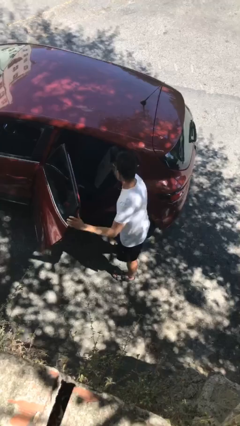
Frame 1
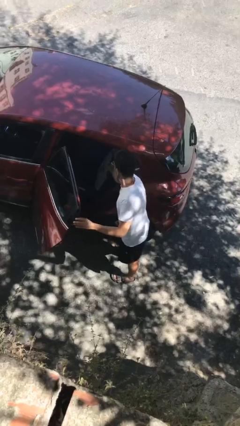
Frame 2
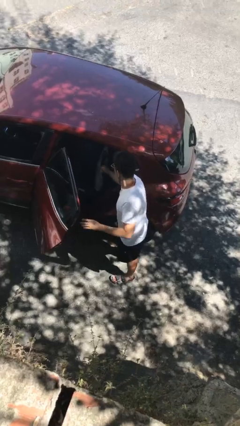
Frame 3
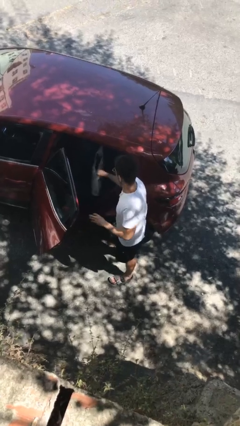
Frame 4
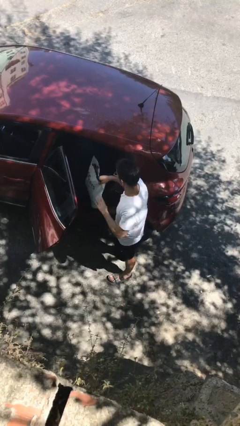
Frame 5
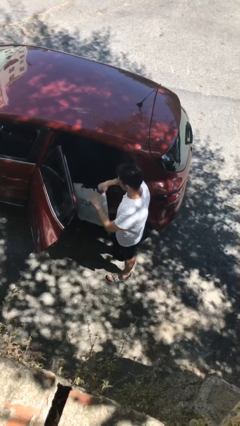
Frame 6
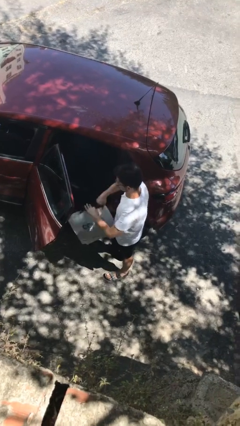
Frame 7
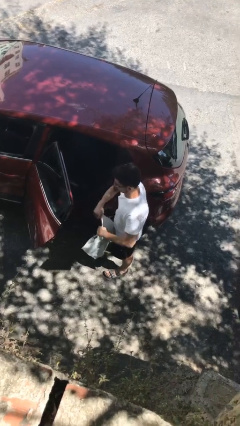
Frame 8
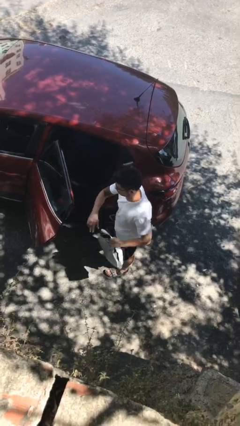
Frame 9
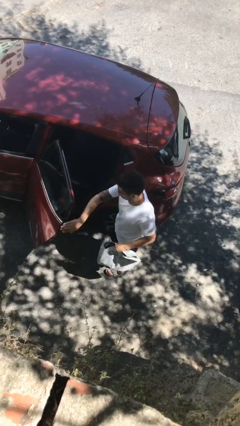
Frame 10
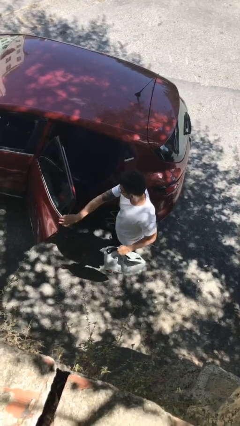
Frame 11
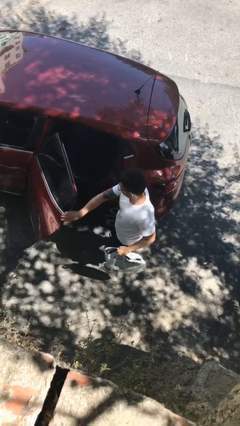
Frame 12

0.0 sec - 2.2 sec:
person unloads car

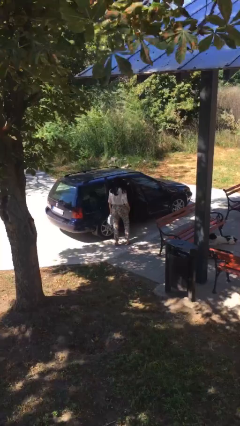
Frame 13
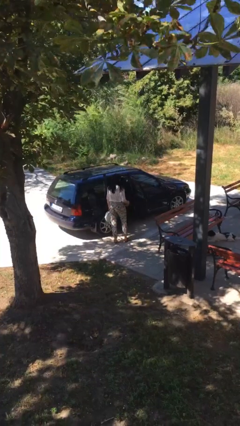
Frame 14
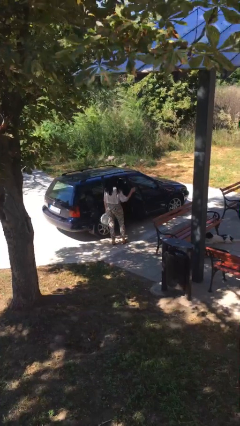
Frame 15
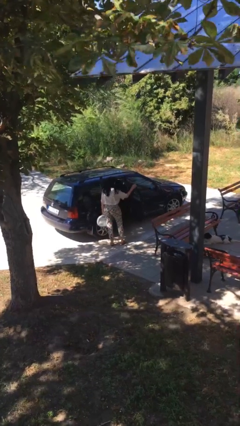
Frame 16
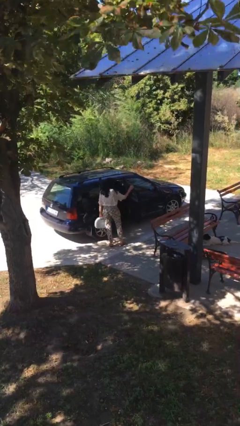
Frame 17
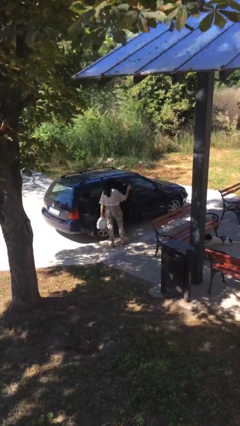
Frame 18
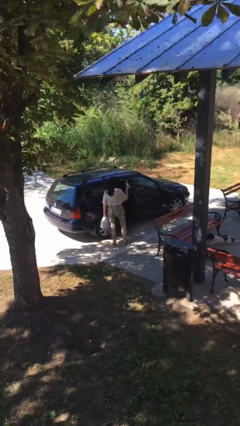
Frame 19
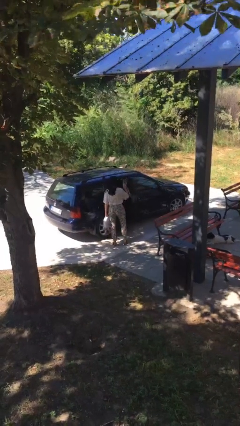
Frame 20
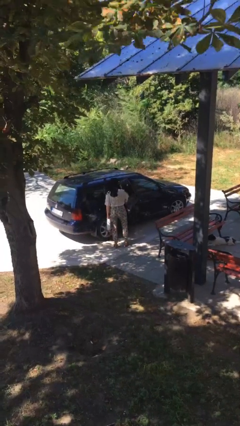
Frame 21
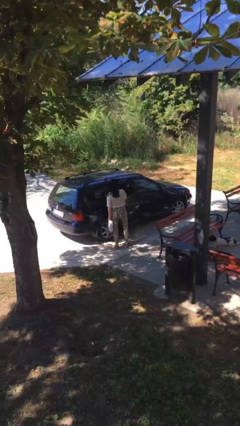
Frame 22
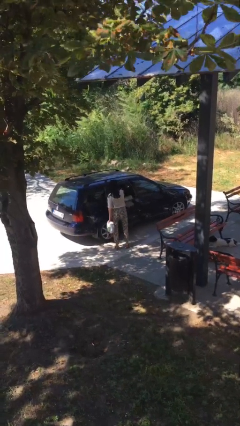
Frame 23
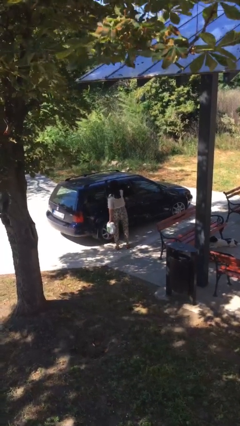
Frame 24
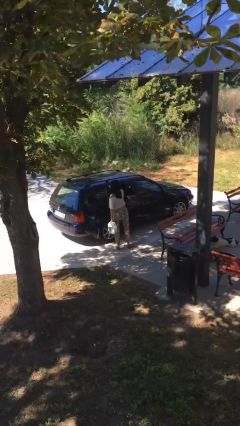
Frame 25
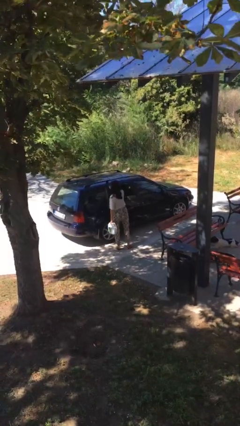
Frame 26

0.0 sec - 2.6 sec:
person closes car door

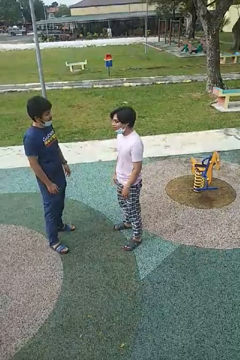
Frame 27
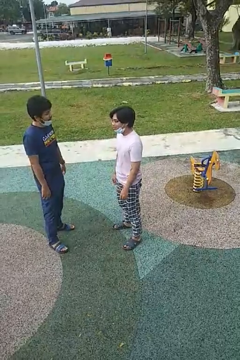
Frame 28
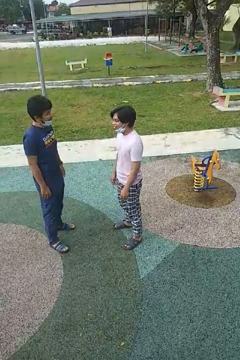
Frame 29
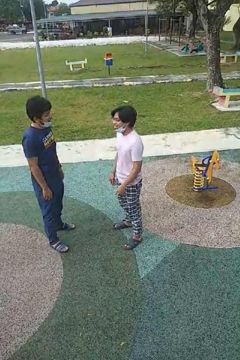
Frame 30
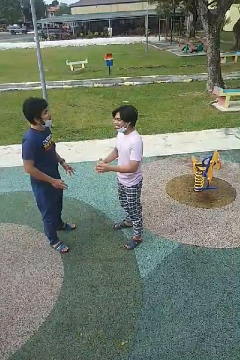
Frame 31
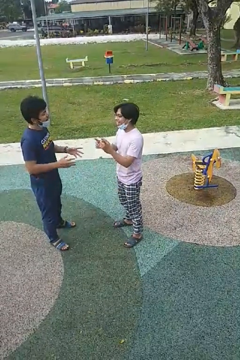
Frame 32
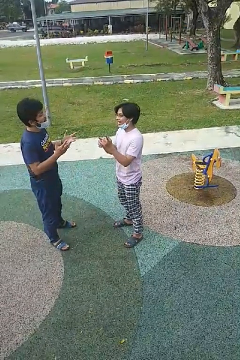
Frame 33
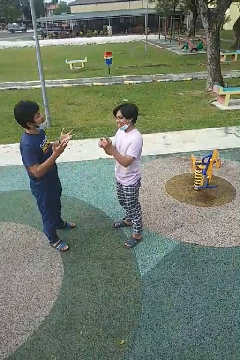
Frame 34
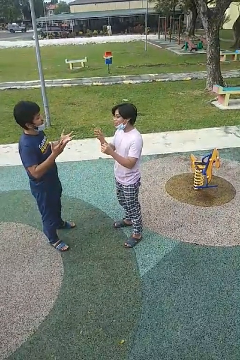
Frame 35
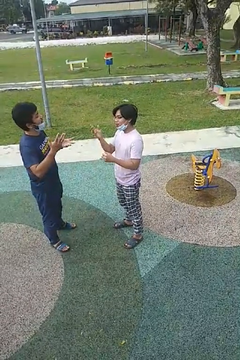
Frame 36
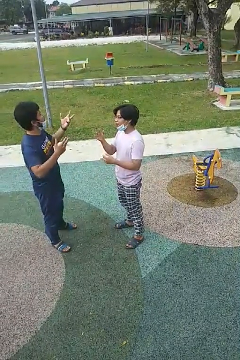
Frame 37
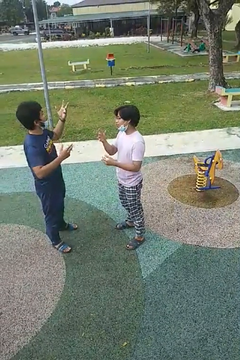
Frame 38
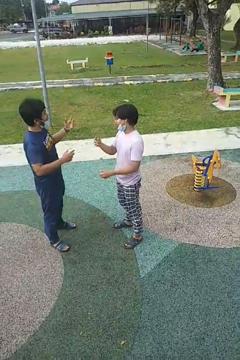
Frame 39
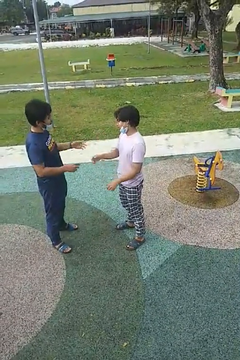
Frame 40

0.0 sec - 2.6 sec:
person talks to person

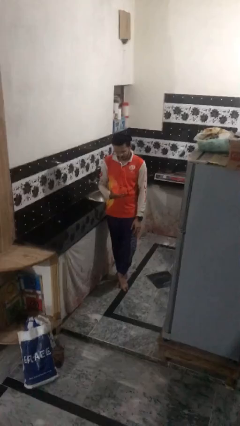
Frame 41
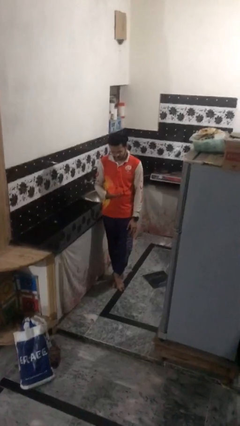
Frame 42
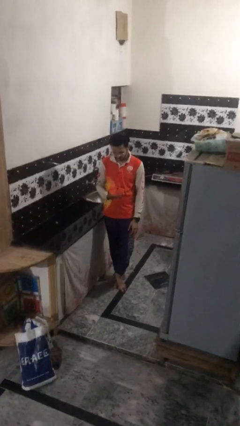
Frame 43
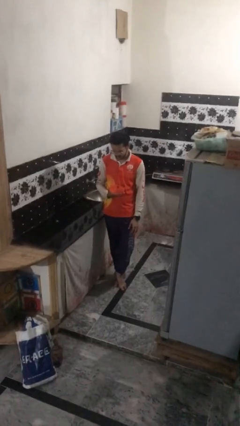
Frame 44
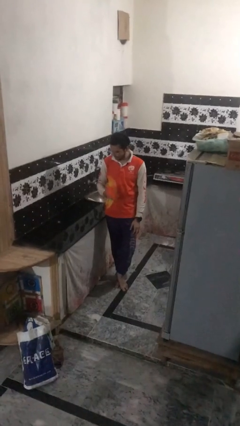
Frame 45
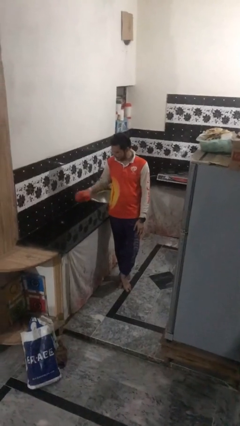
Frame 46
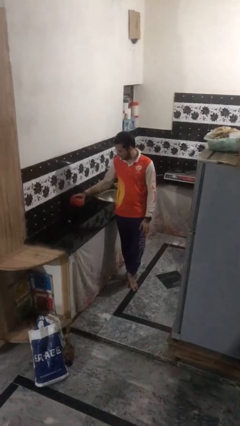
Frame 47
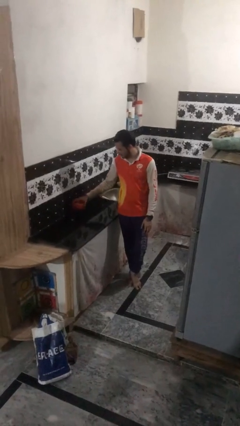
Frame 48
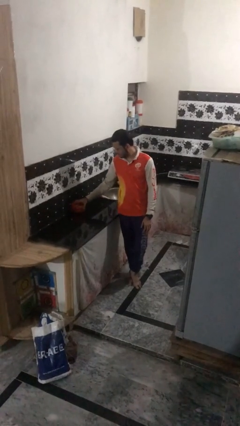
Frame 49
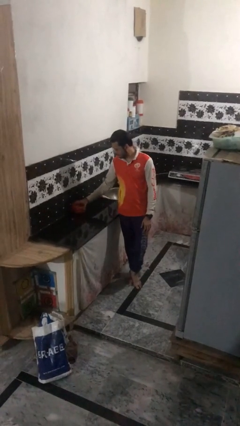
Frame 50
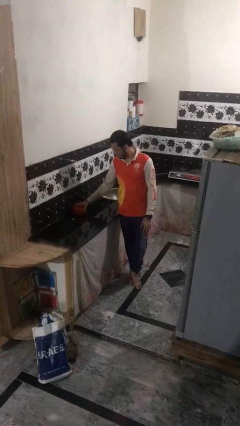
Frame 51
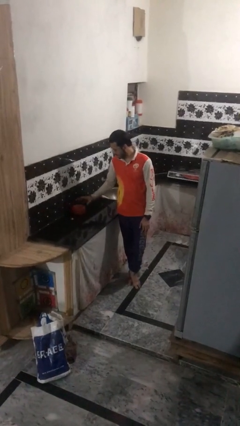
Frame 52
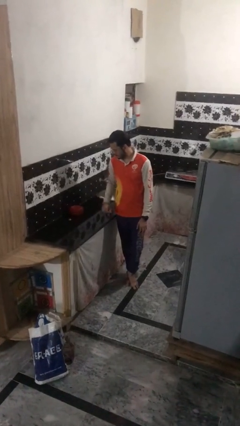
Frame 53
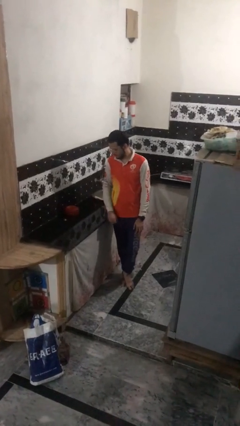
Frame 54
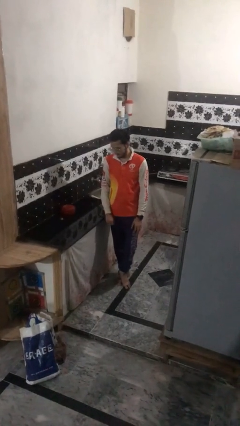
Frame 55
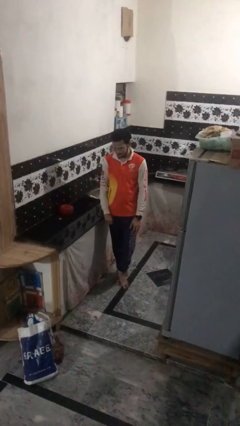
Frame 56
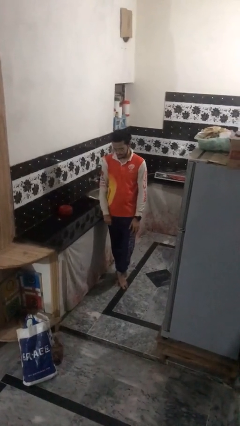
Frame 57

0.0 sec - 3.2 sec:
person puts down object on countertop

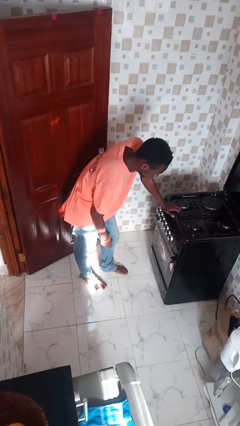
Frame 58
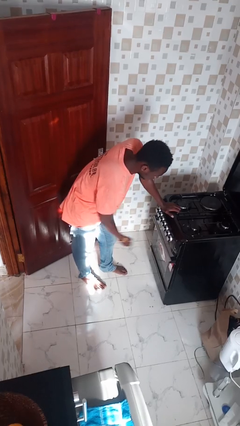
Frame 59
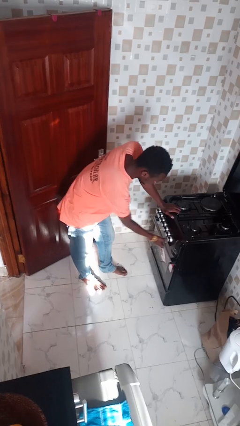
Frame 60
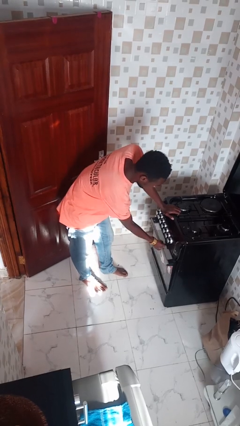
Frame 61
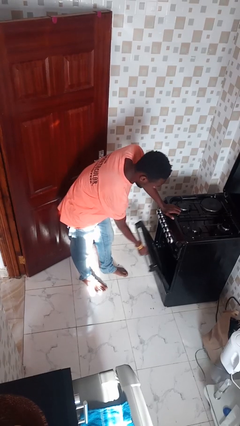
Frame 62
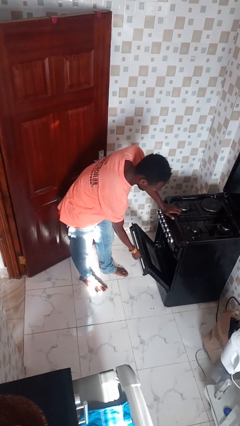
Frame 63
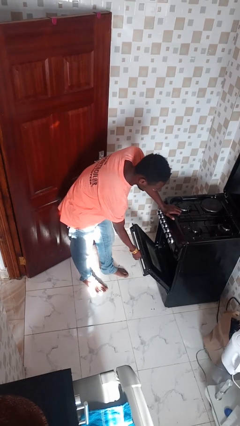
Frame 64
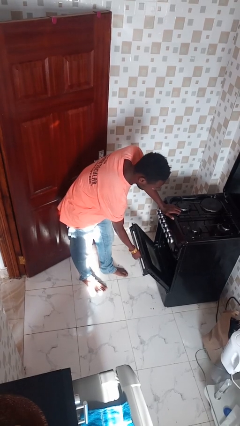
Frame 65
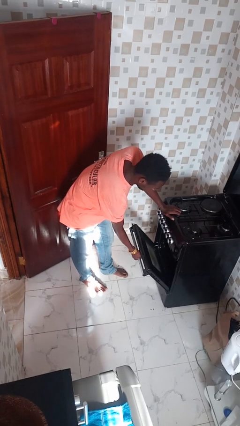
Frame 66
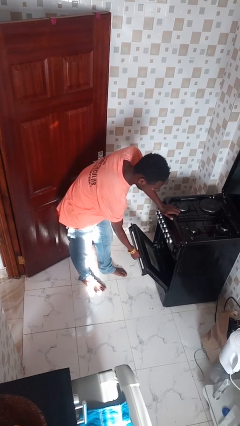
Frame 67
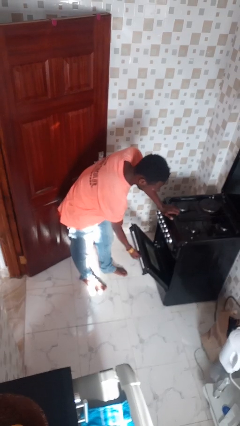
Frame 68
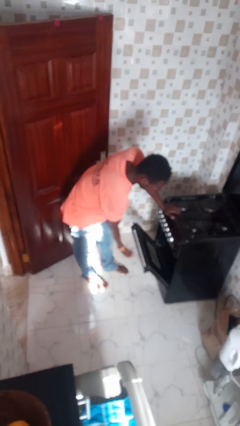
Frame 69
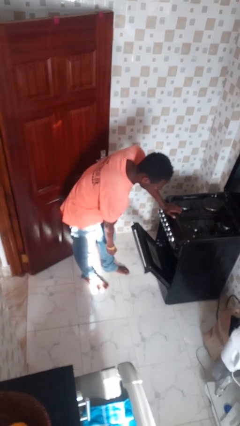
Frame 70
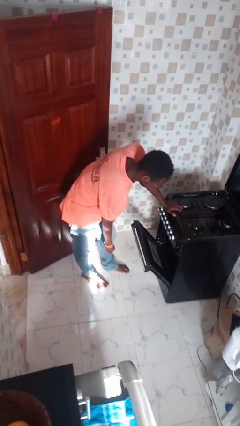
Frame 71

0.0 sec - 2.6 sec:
person opens oven door

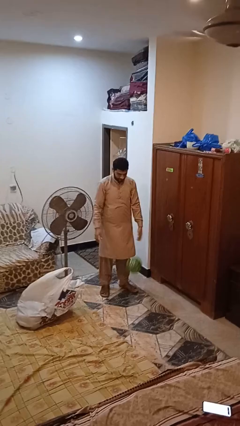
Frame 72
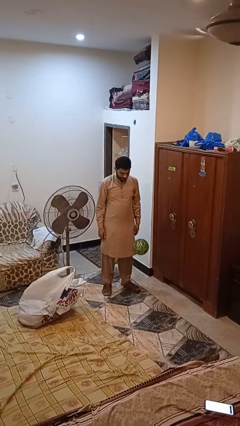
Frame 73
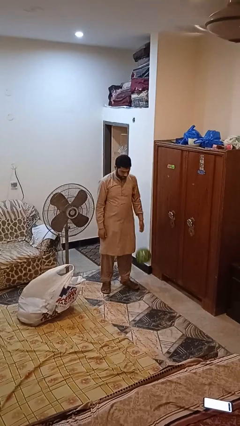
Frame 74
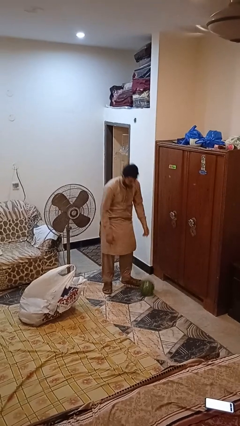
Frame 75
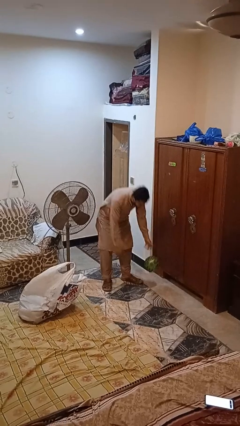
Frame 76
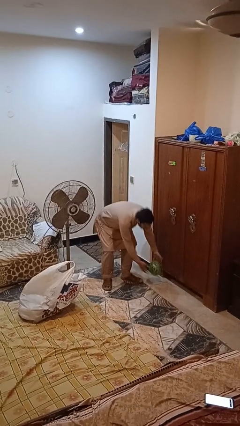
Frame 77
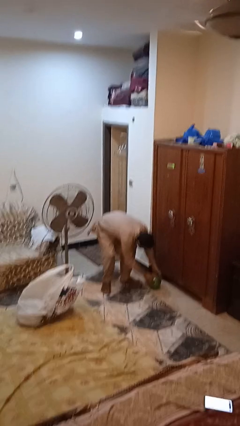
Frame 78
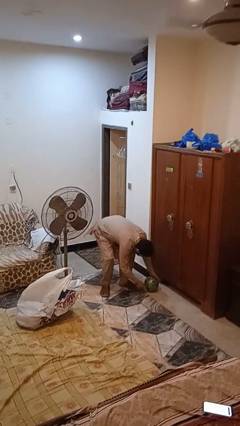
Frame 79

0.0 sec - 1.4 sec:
person catches dropped object

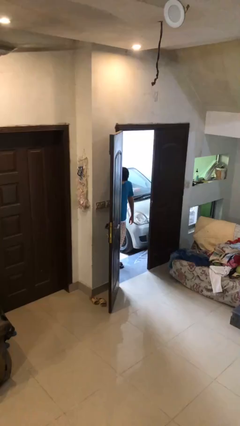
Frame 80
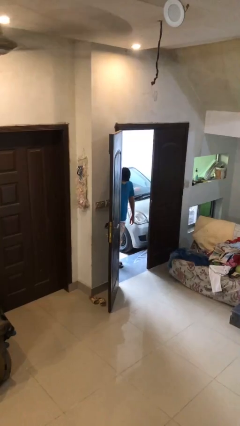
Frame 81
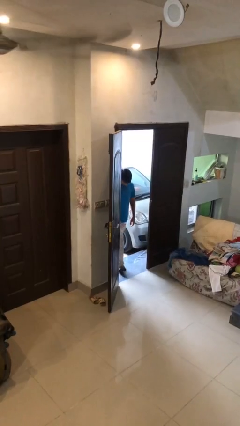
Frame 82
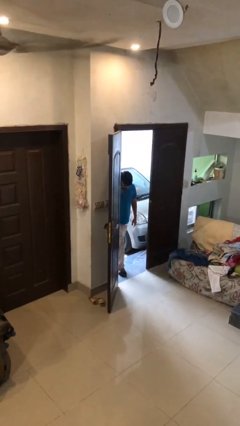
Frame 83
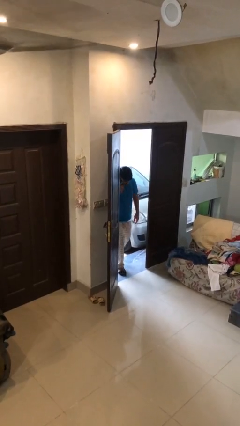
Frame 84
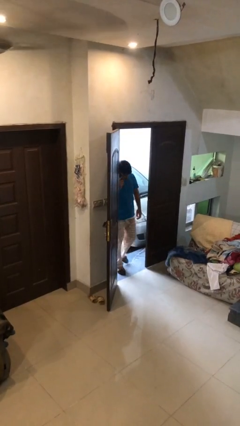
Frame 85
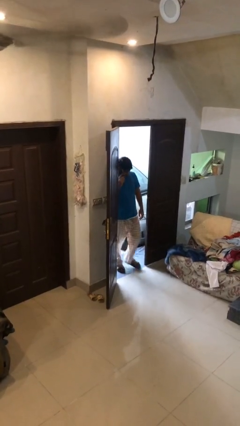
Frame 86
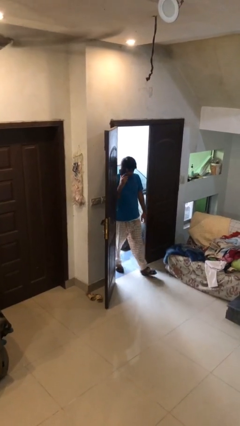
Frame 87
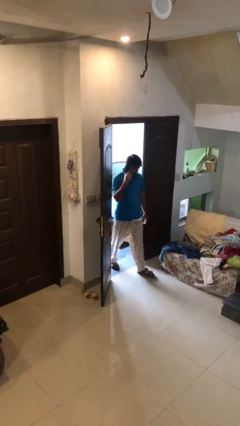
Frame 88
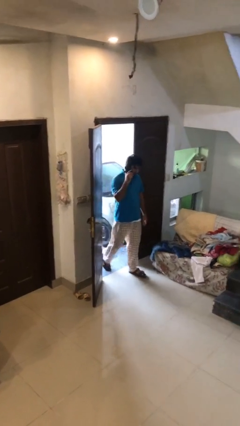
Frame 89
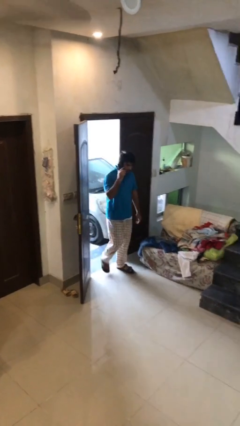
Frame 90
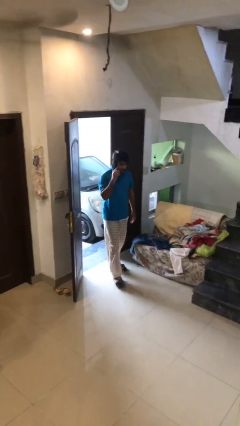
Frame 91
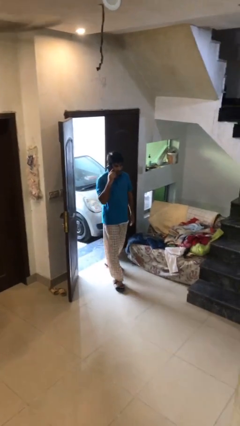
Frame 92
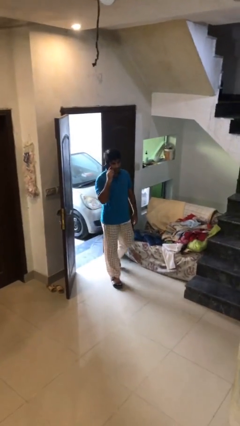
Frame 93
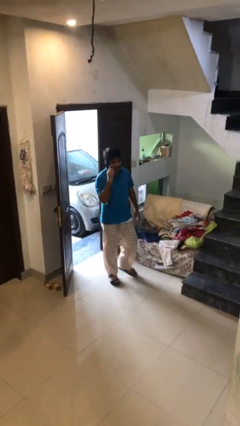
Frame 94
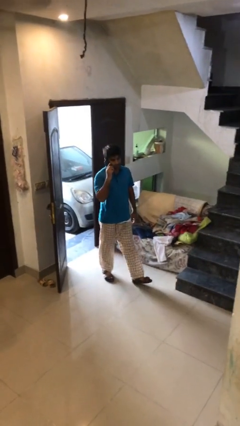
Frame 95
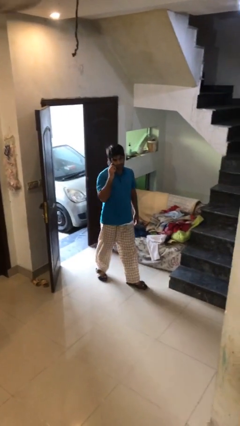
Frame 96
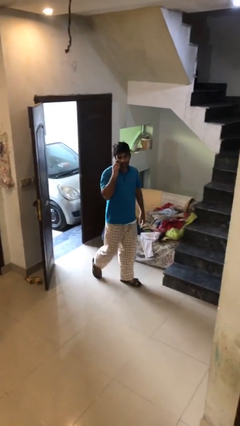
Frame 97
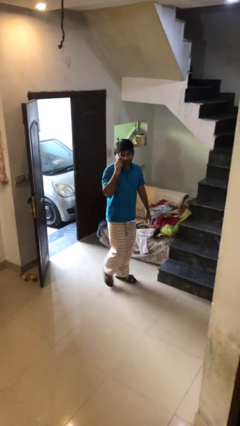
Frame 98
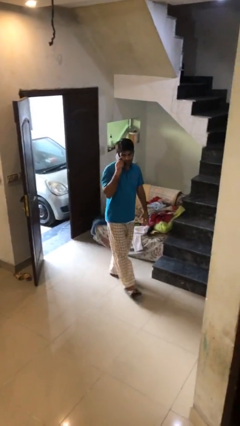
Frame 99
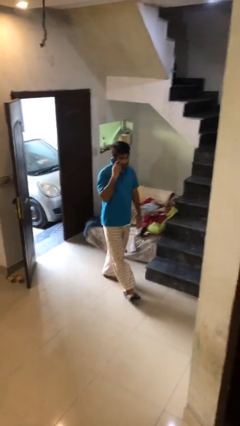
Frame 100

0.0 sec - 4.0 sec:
person enters scene through structure
